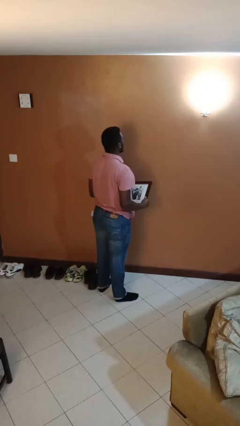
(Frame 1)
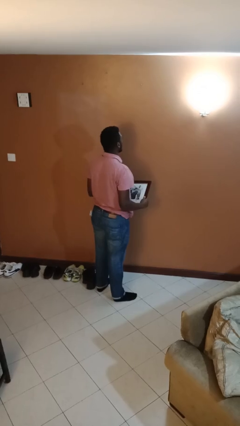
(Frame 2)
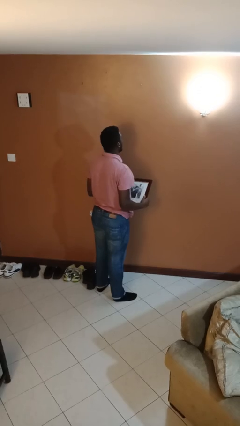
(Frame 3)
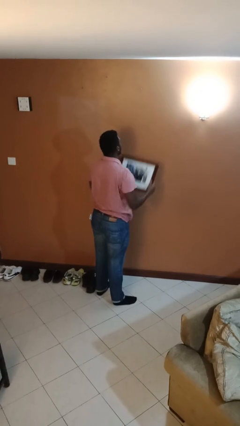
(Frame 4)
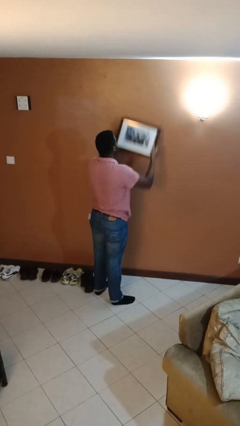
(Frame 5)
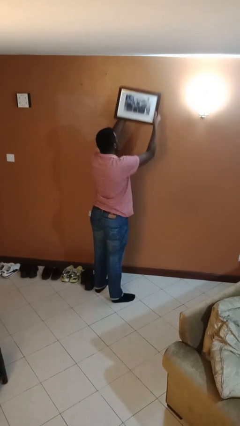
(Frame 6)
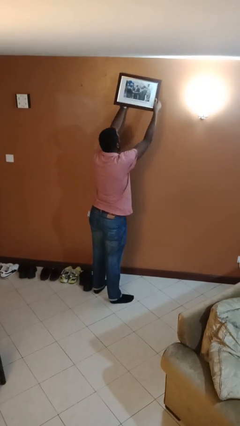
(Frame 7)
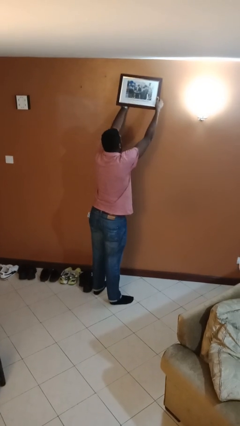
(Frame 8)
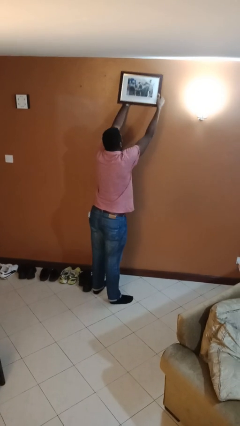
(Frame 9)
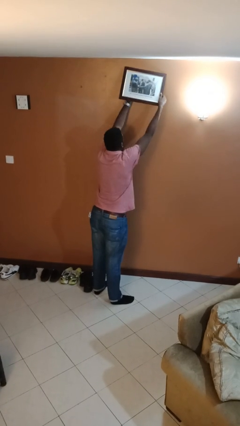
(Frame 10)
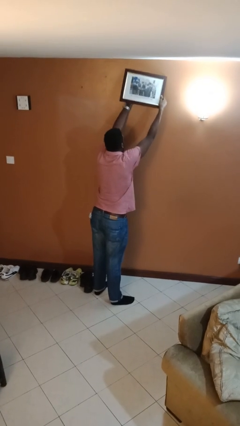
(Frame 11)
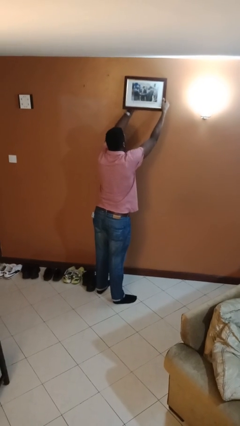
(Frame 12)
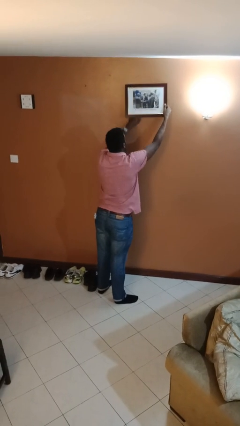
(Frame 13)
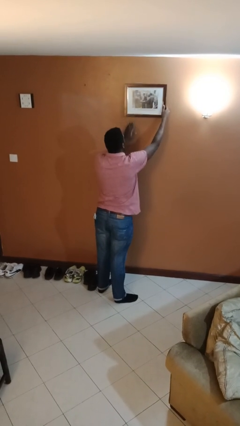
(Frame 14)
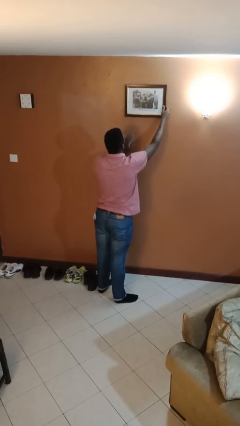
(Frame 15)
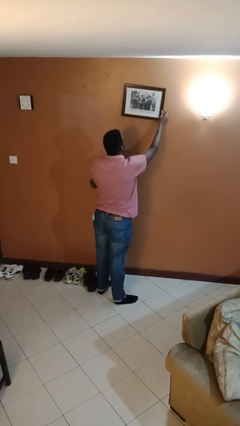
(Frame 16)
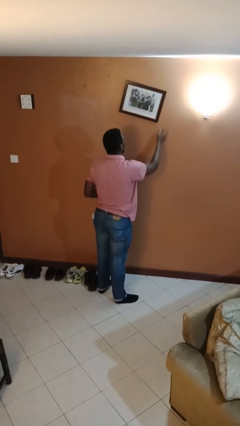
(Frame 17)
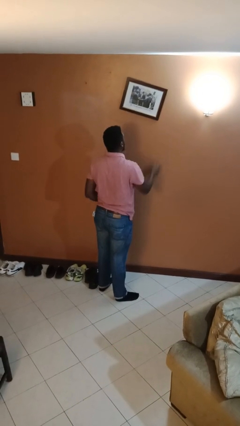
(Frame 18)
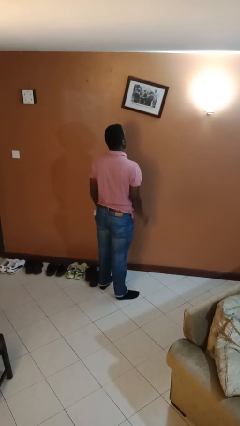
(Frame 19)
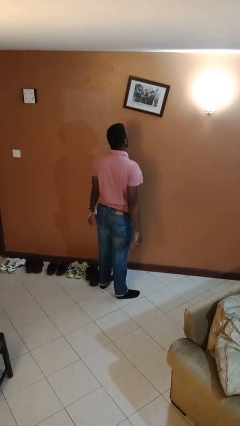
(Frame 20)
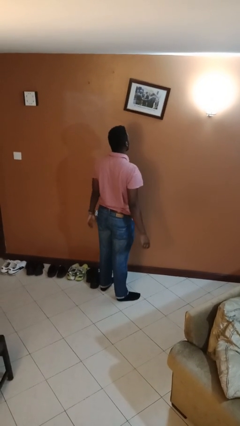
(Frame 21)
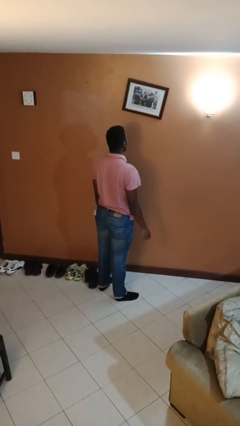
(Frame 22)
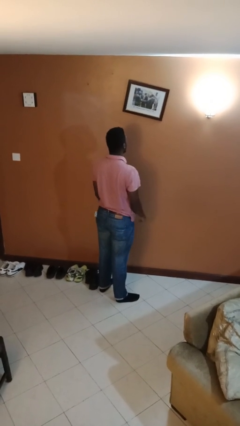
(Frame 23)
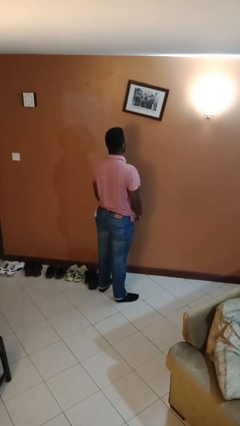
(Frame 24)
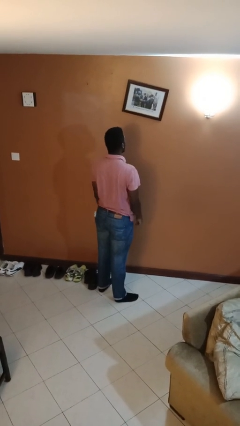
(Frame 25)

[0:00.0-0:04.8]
person puts up picture frame

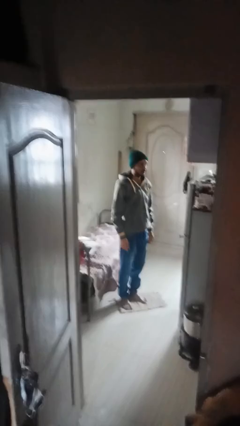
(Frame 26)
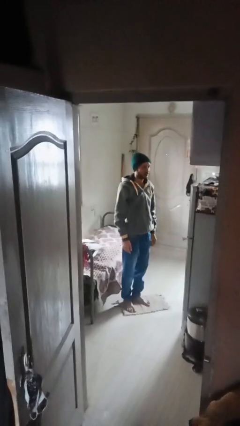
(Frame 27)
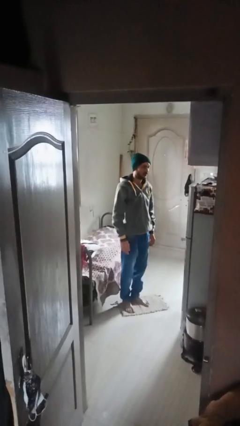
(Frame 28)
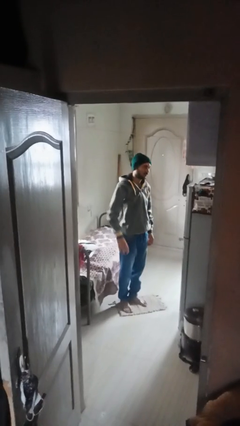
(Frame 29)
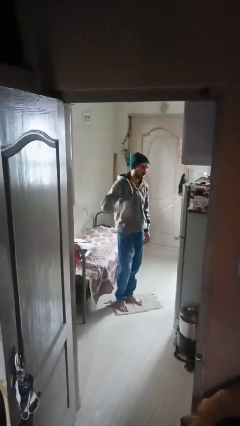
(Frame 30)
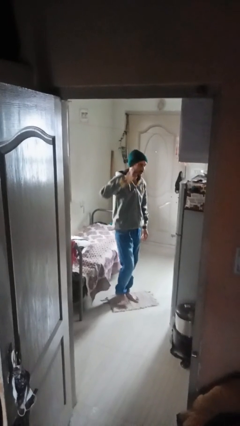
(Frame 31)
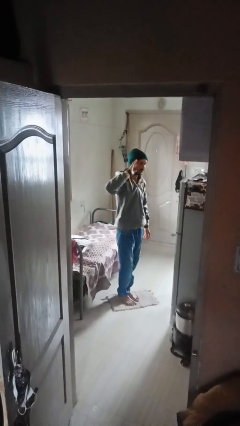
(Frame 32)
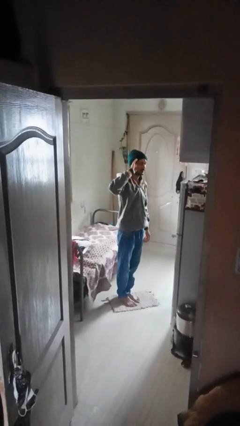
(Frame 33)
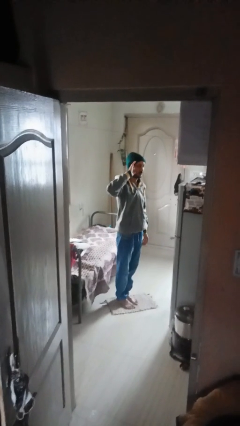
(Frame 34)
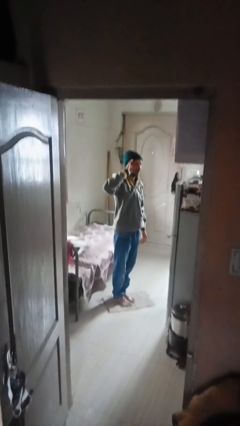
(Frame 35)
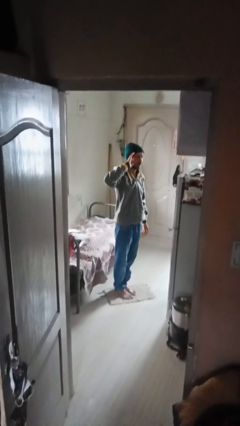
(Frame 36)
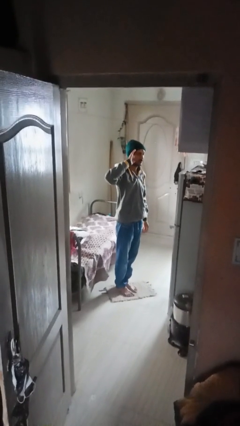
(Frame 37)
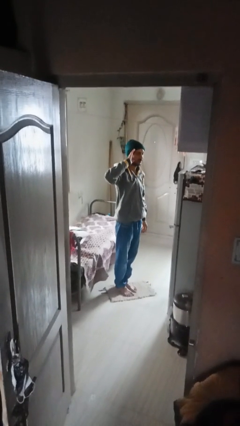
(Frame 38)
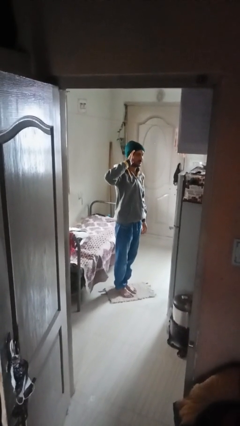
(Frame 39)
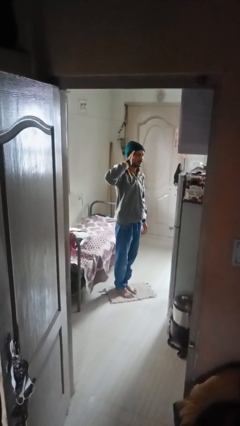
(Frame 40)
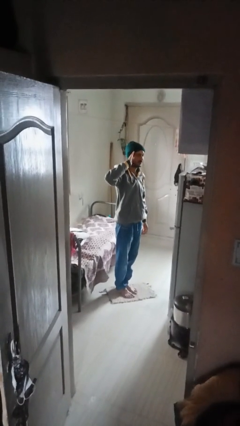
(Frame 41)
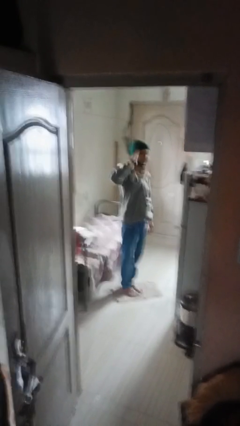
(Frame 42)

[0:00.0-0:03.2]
person salutes

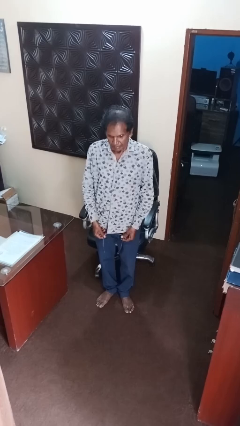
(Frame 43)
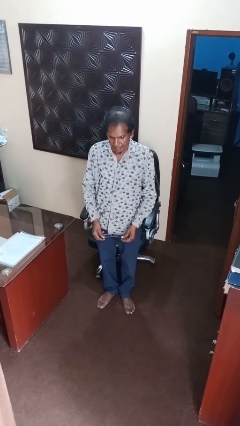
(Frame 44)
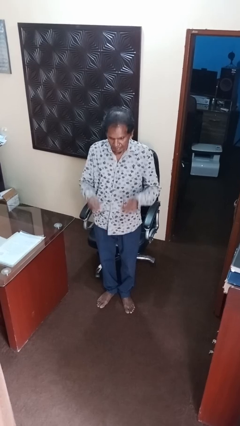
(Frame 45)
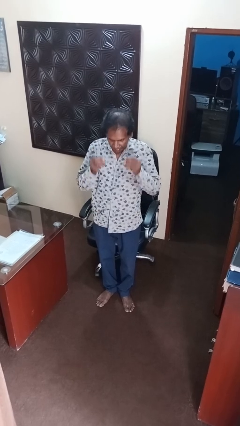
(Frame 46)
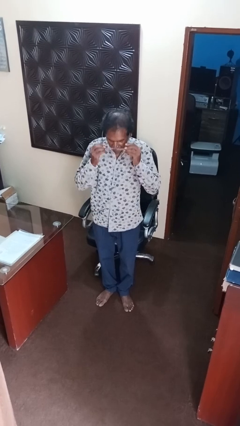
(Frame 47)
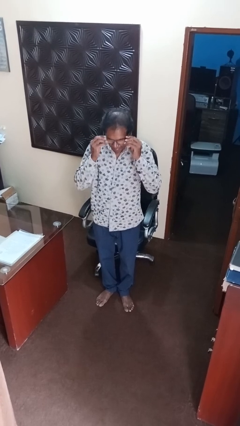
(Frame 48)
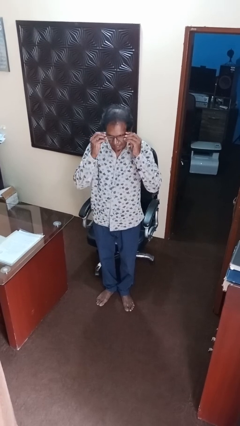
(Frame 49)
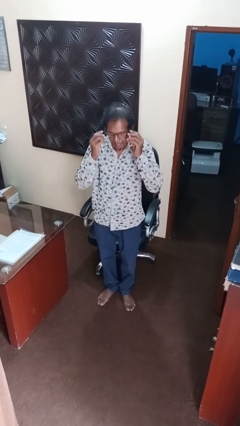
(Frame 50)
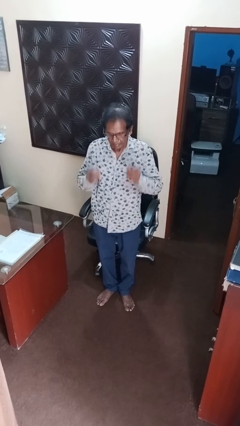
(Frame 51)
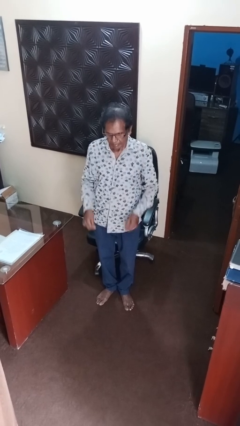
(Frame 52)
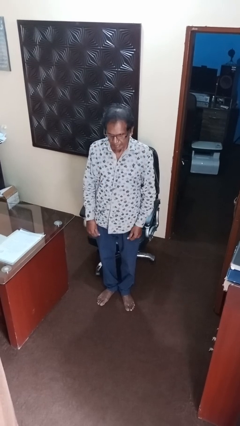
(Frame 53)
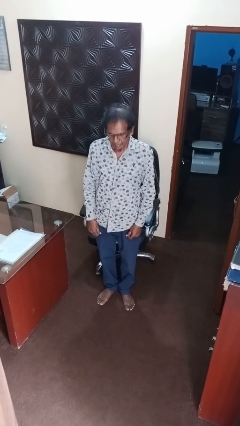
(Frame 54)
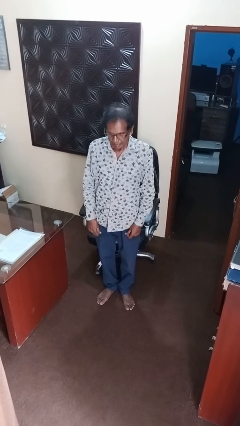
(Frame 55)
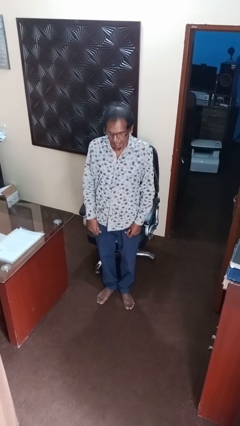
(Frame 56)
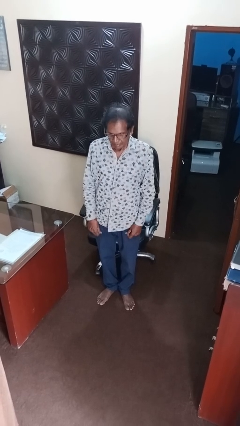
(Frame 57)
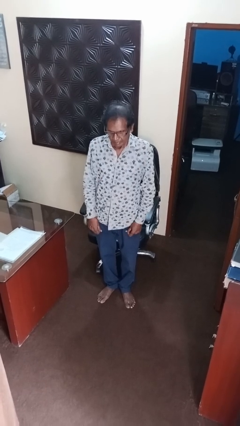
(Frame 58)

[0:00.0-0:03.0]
person puts on glasses

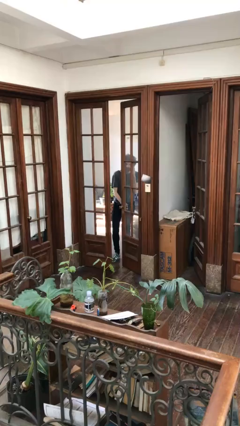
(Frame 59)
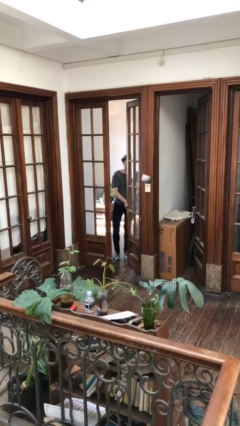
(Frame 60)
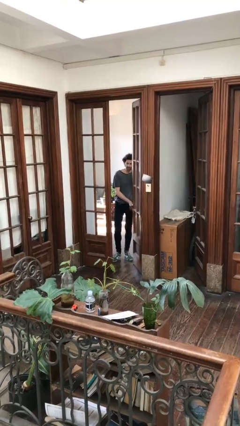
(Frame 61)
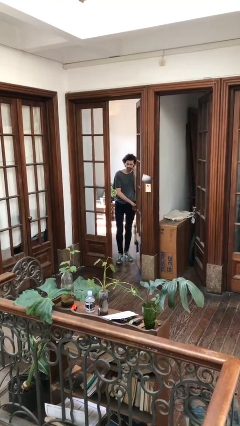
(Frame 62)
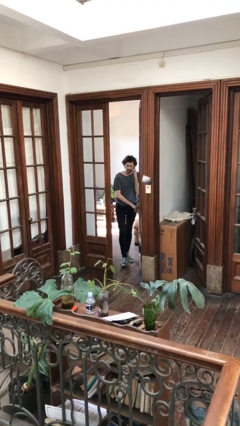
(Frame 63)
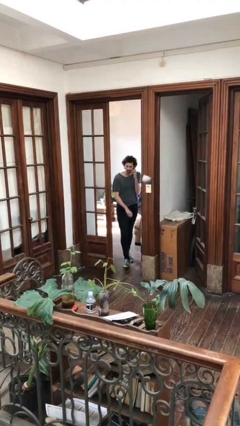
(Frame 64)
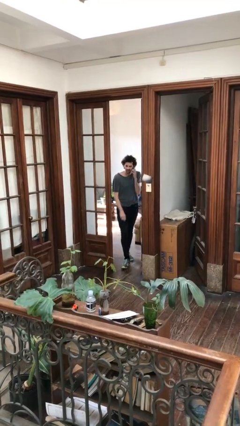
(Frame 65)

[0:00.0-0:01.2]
person opens facility door

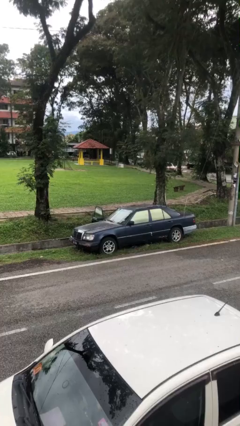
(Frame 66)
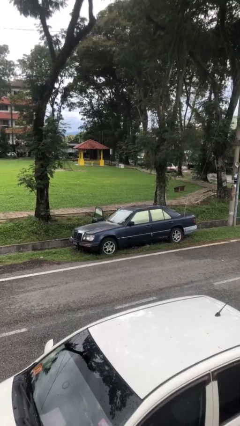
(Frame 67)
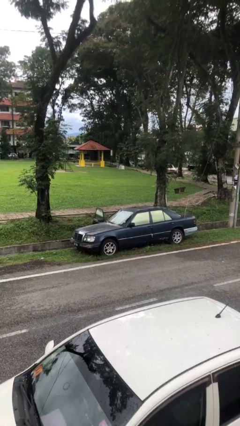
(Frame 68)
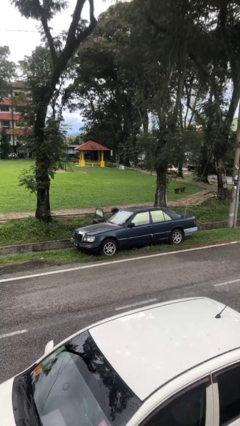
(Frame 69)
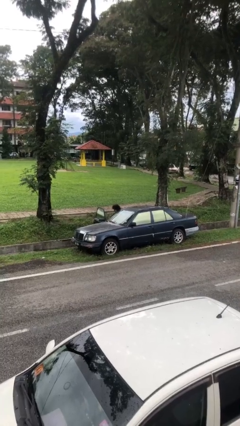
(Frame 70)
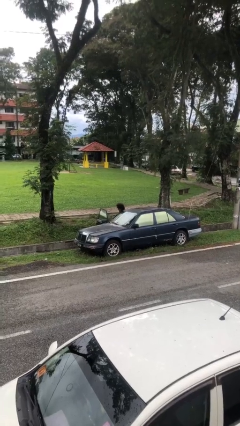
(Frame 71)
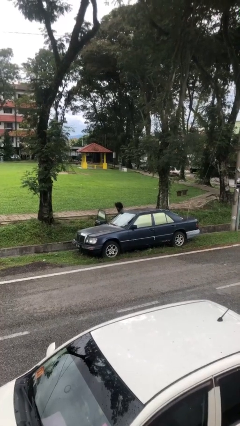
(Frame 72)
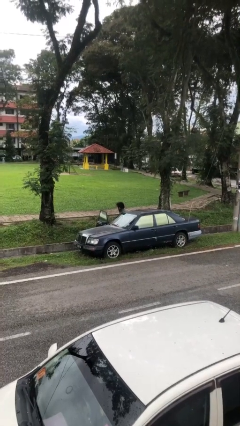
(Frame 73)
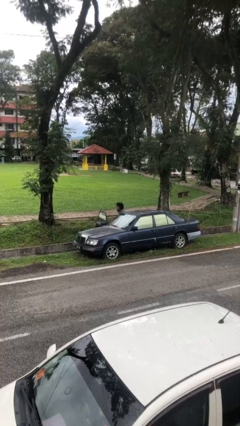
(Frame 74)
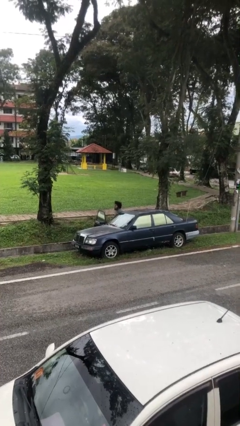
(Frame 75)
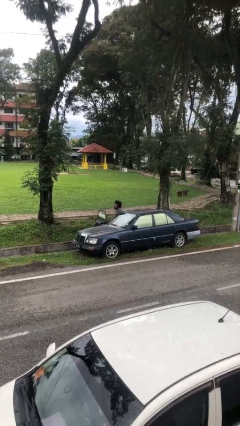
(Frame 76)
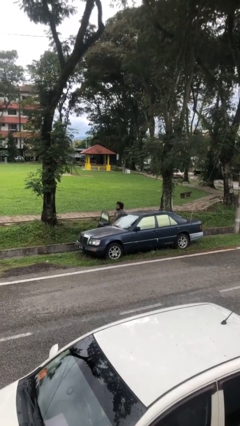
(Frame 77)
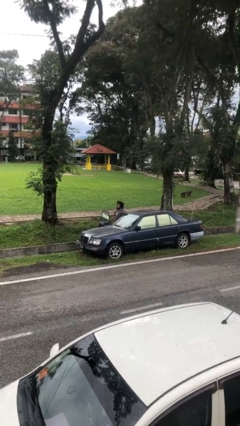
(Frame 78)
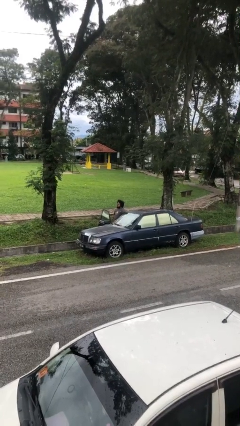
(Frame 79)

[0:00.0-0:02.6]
person exits car

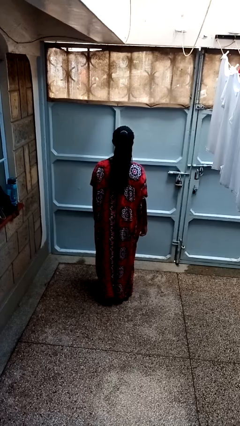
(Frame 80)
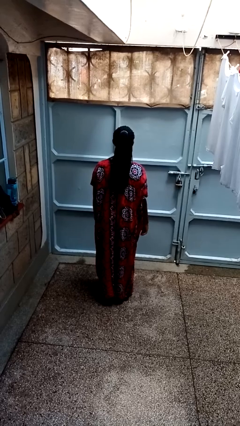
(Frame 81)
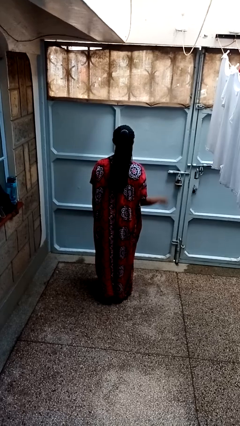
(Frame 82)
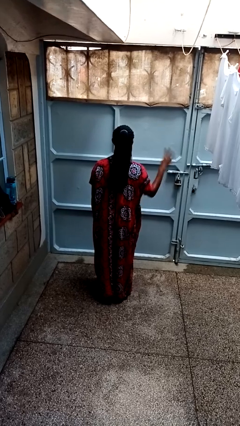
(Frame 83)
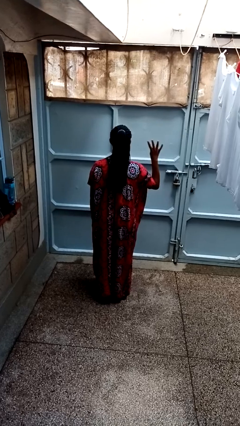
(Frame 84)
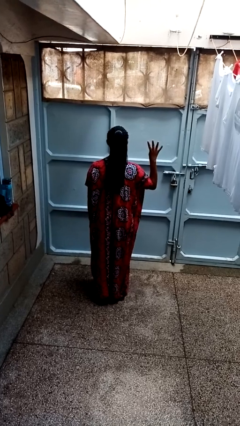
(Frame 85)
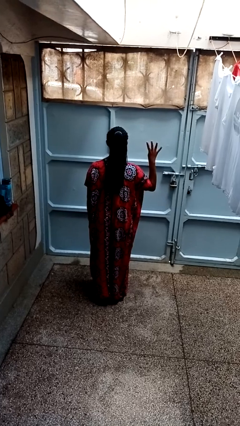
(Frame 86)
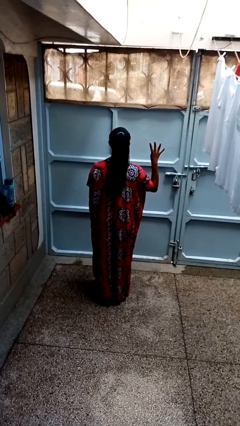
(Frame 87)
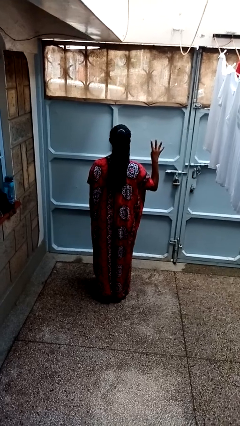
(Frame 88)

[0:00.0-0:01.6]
person gestures number four

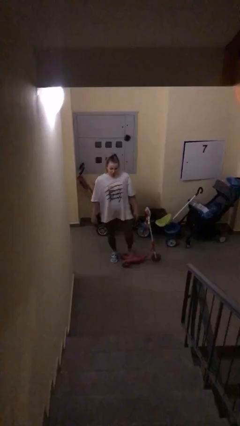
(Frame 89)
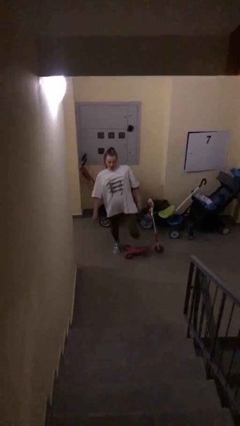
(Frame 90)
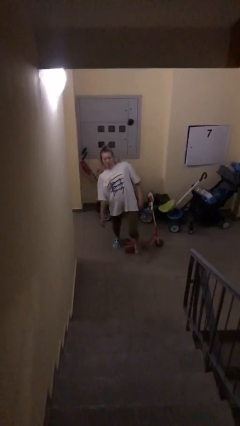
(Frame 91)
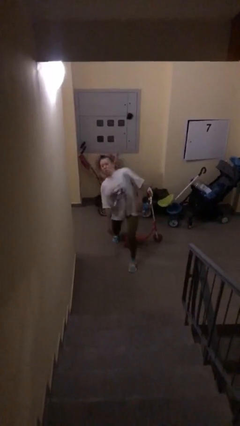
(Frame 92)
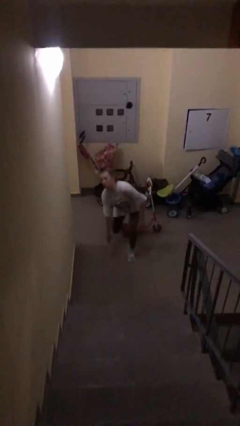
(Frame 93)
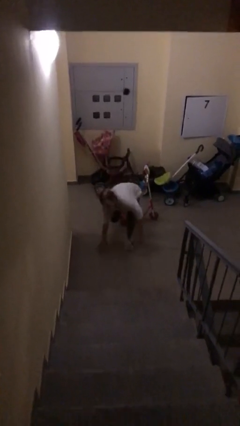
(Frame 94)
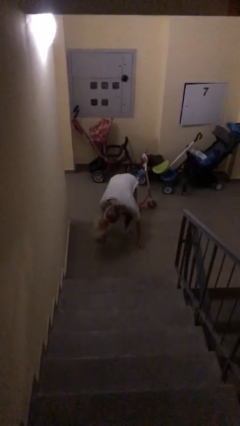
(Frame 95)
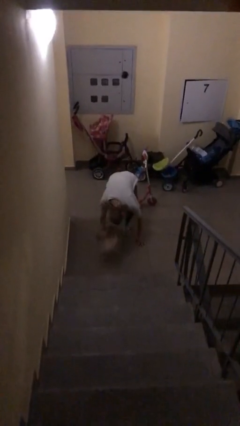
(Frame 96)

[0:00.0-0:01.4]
person trips on object on floor
